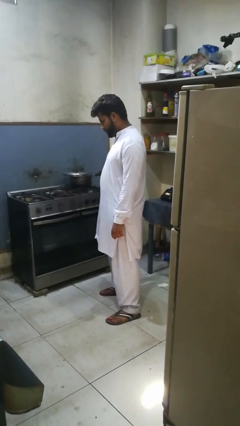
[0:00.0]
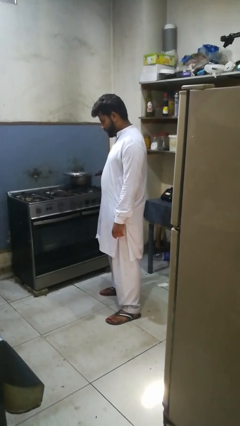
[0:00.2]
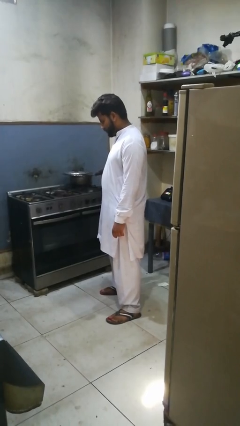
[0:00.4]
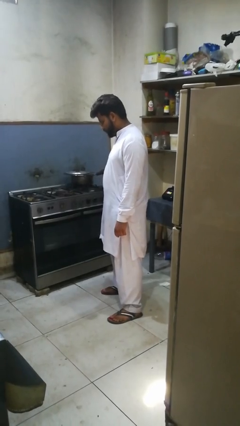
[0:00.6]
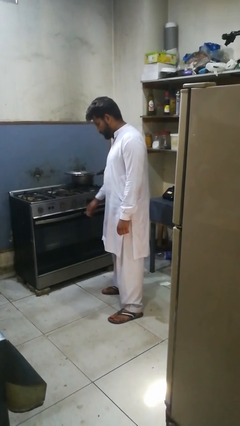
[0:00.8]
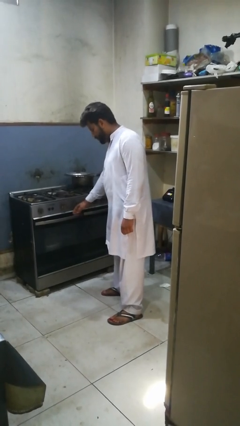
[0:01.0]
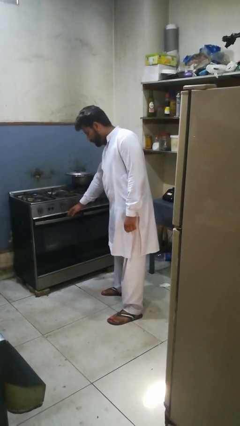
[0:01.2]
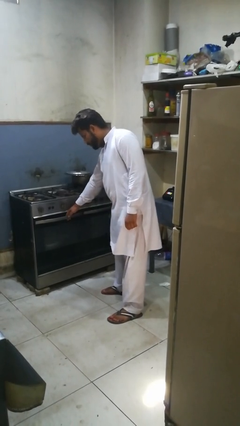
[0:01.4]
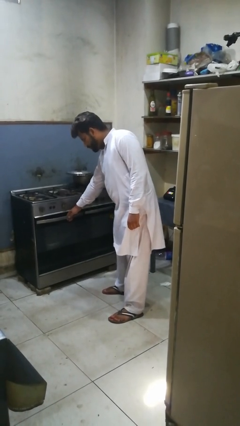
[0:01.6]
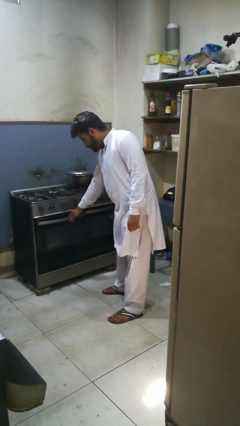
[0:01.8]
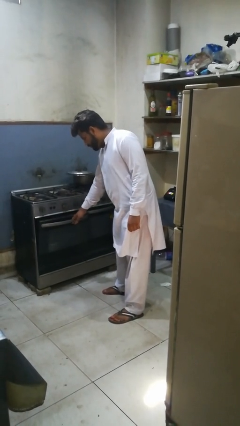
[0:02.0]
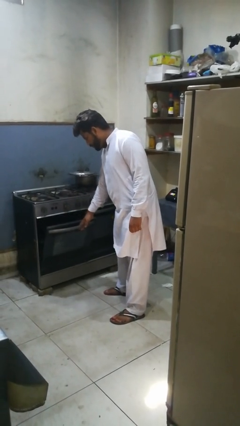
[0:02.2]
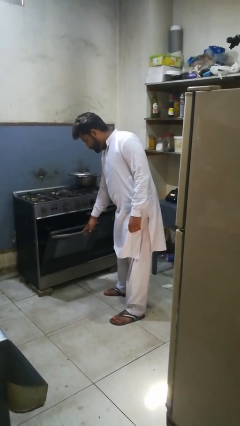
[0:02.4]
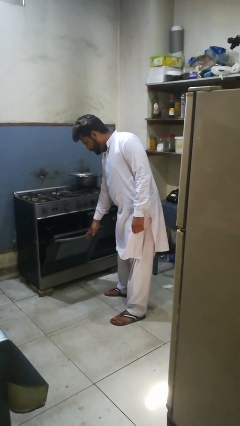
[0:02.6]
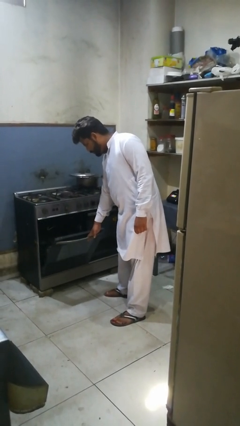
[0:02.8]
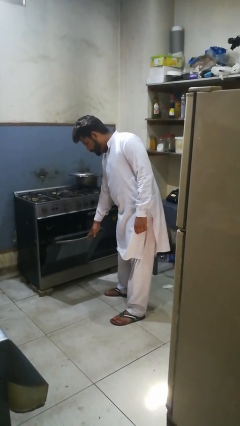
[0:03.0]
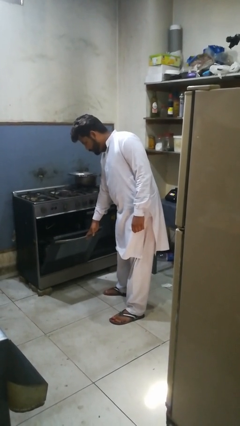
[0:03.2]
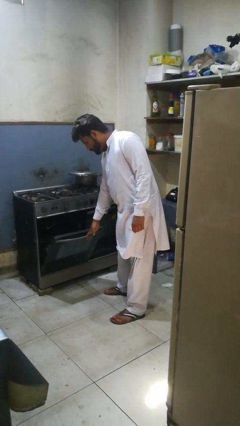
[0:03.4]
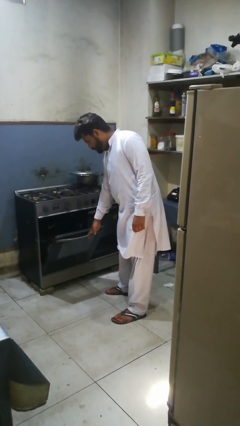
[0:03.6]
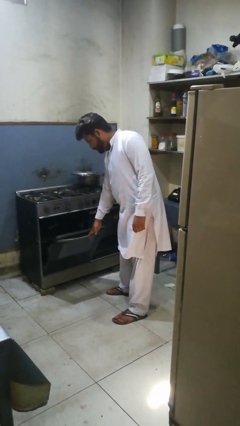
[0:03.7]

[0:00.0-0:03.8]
person opens oven door

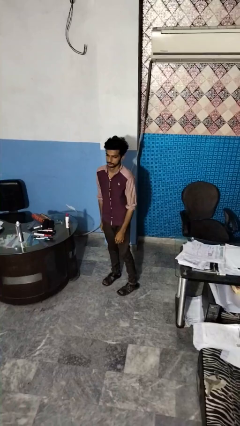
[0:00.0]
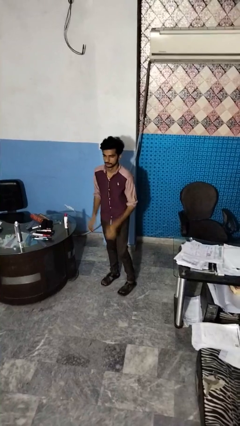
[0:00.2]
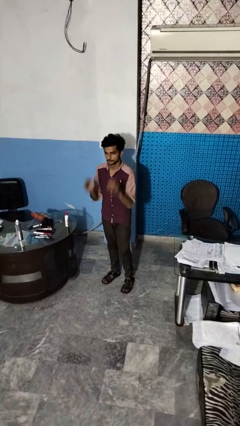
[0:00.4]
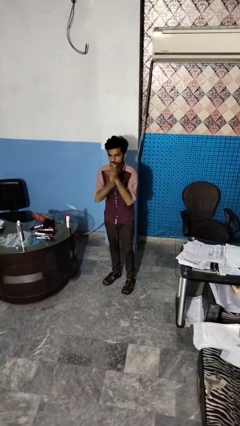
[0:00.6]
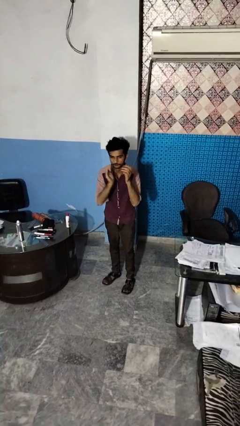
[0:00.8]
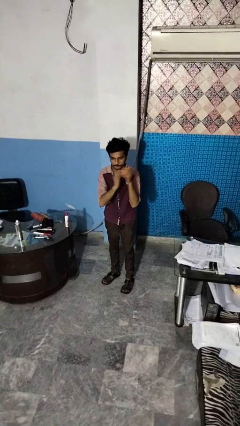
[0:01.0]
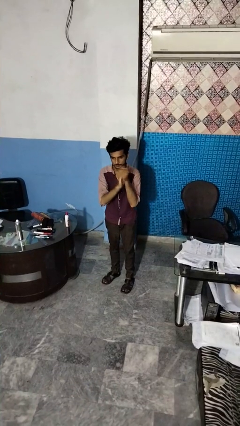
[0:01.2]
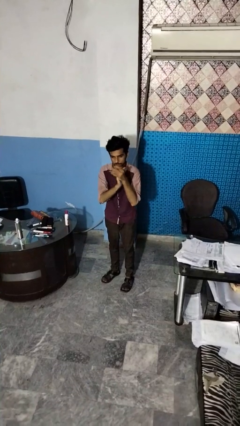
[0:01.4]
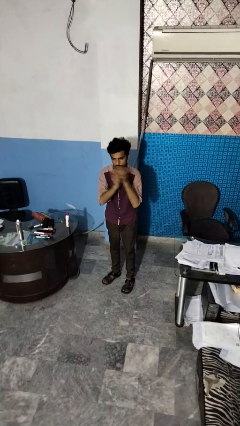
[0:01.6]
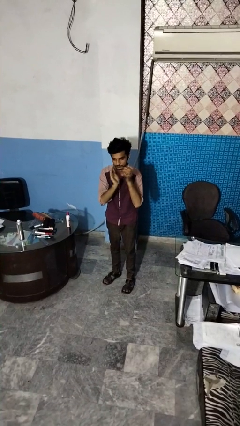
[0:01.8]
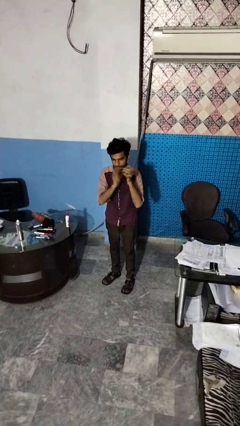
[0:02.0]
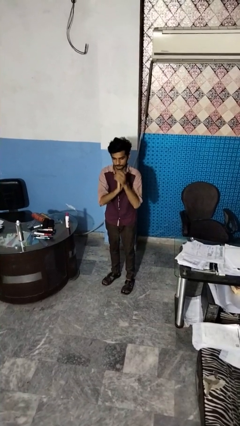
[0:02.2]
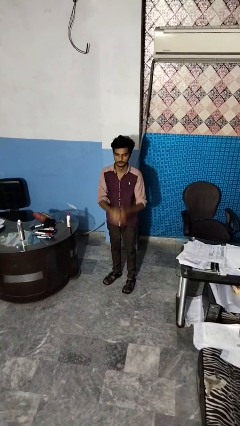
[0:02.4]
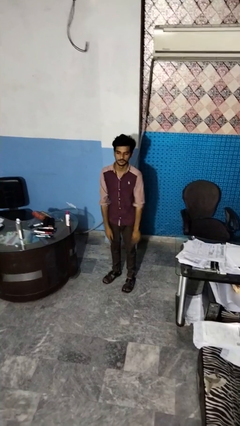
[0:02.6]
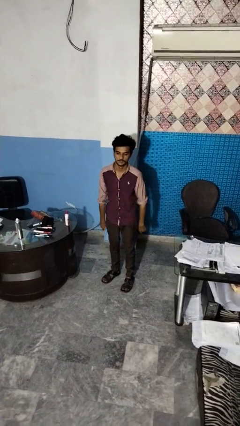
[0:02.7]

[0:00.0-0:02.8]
person claps hands

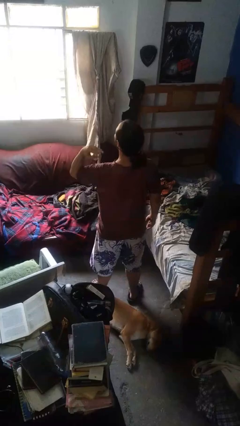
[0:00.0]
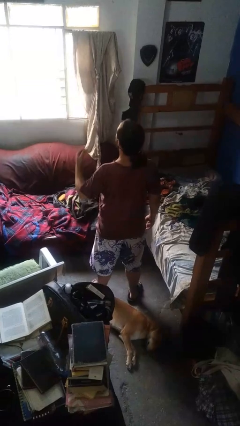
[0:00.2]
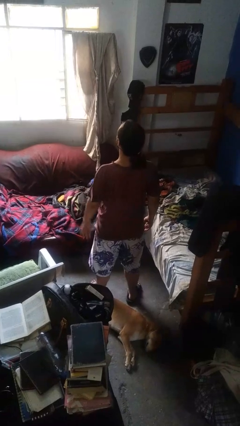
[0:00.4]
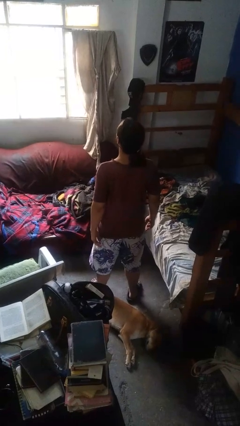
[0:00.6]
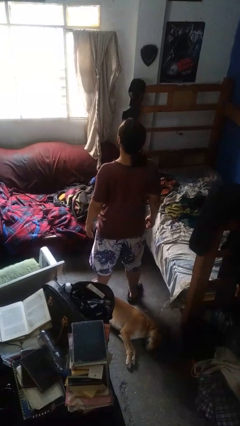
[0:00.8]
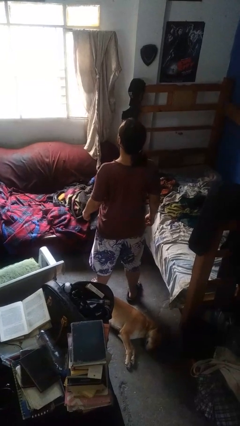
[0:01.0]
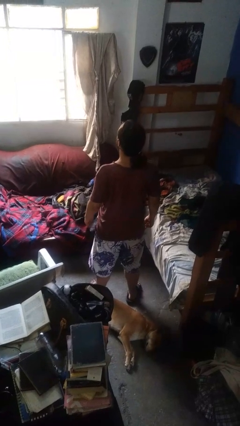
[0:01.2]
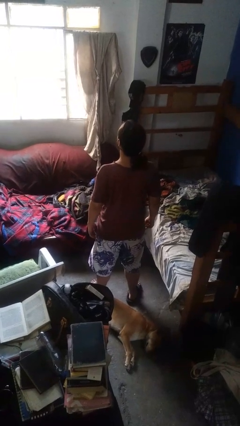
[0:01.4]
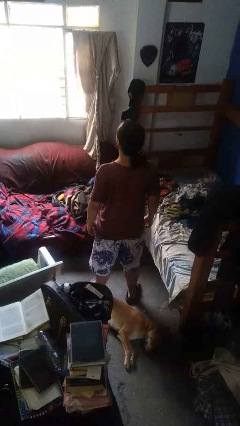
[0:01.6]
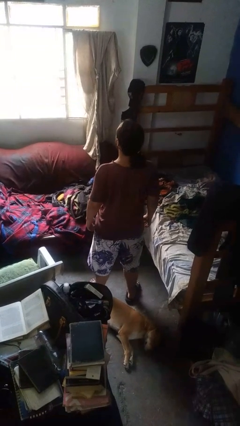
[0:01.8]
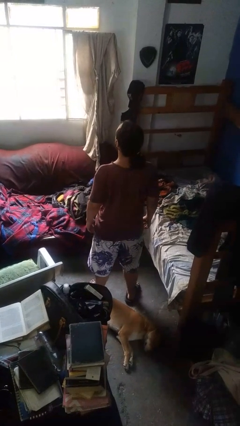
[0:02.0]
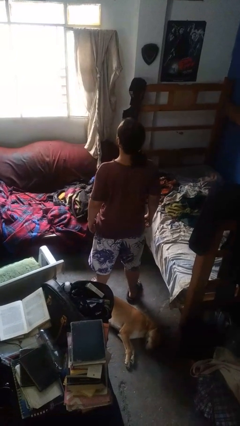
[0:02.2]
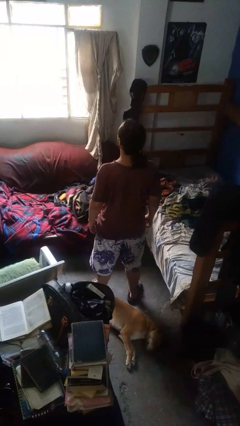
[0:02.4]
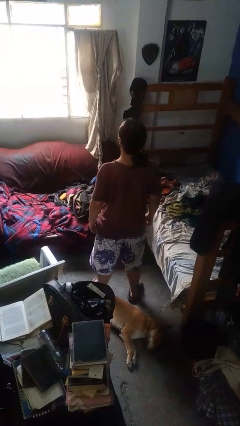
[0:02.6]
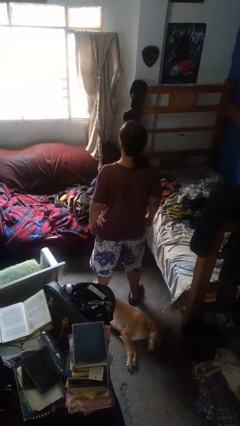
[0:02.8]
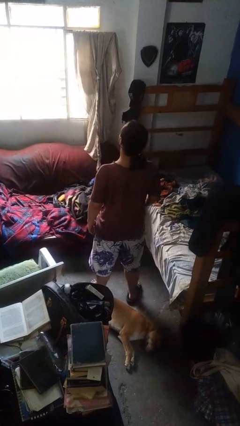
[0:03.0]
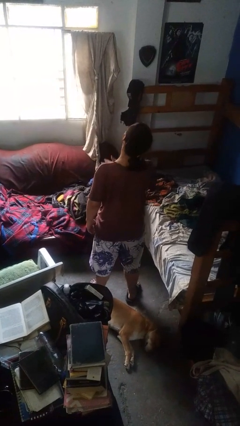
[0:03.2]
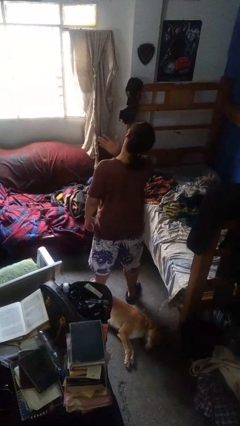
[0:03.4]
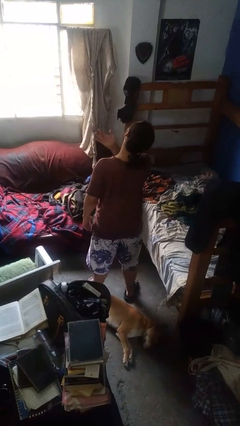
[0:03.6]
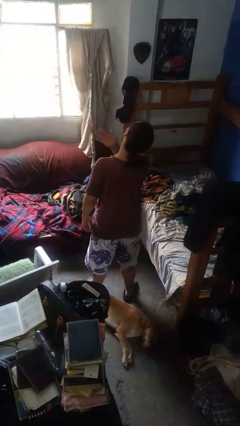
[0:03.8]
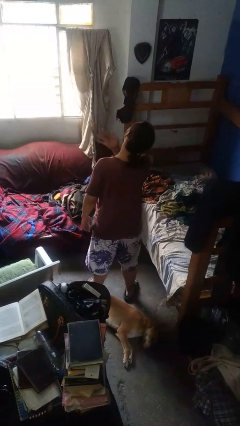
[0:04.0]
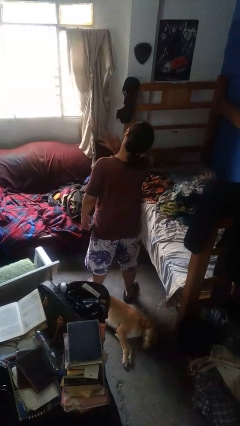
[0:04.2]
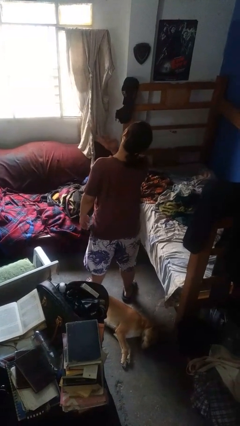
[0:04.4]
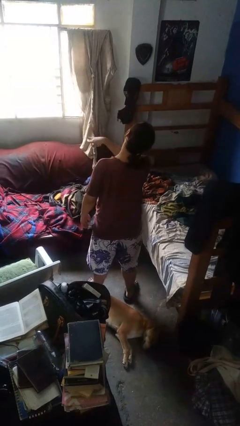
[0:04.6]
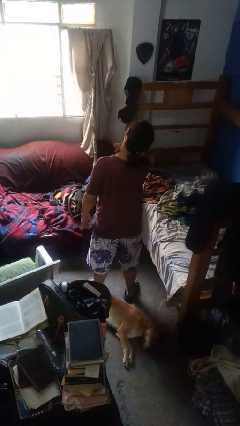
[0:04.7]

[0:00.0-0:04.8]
person gestures watch closely

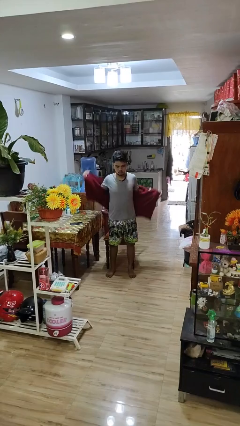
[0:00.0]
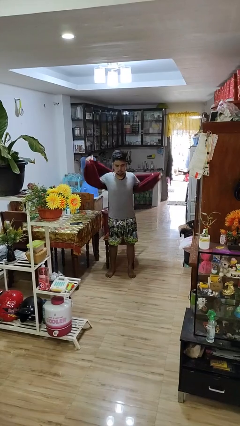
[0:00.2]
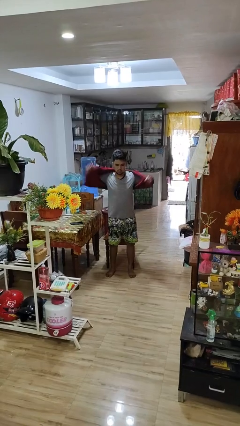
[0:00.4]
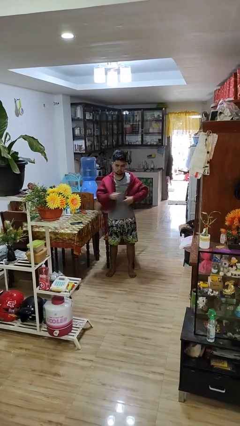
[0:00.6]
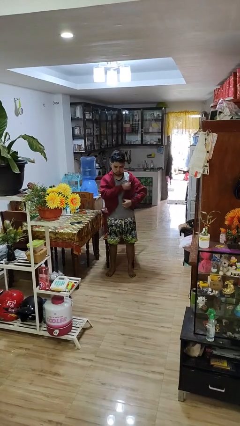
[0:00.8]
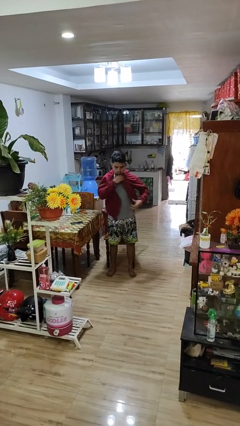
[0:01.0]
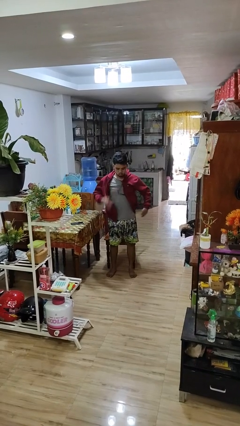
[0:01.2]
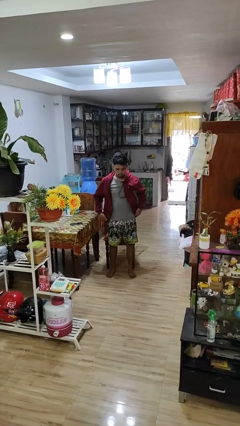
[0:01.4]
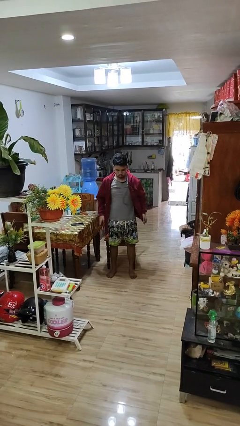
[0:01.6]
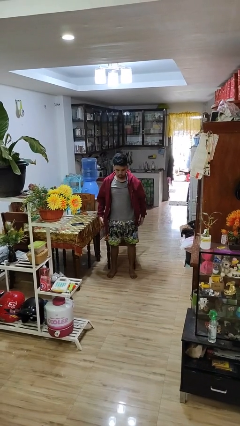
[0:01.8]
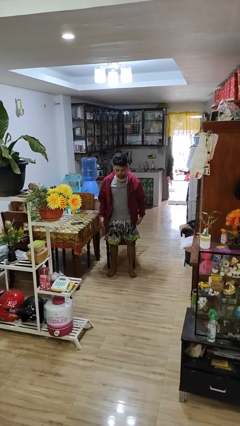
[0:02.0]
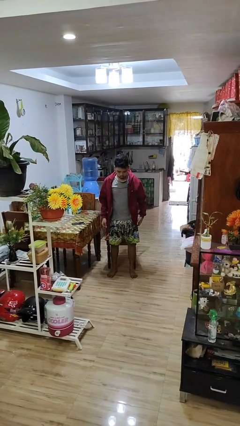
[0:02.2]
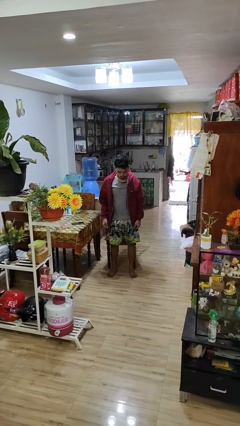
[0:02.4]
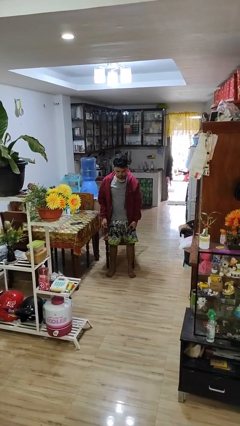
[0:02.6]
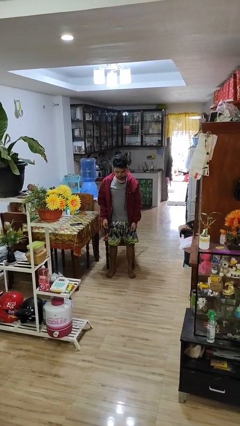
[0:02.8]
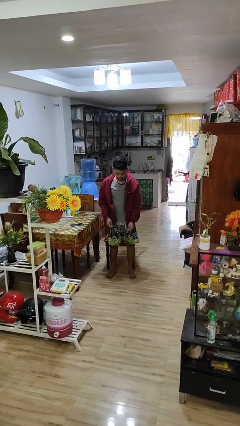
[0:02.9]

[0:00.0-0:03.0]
person puts on jacket

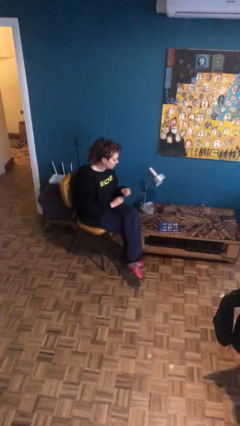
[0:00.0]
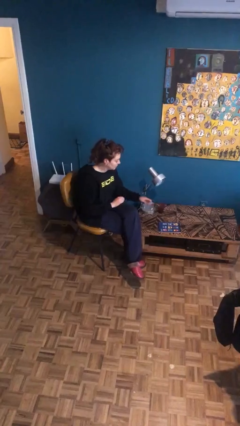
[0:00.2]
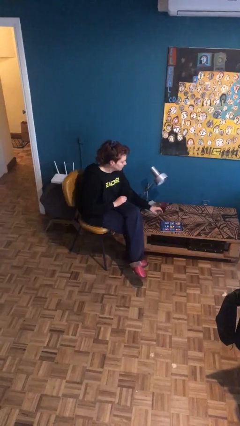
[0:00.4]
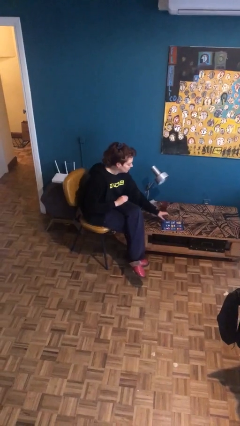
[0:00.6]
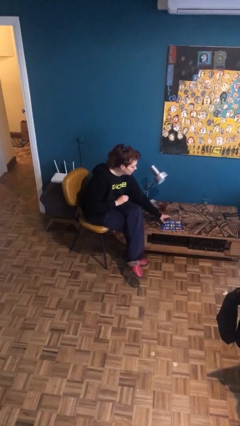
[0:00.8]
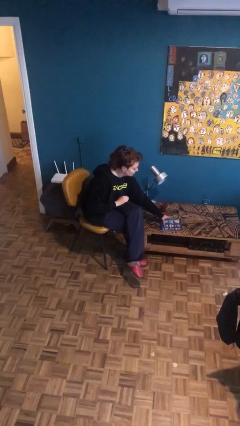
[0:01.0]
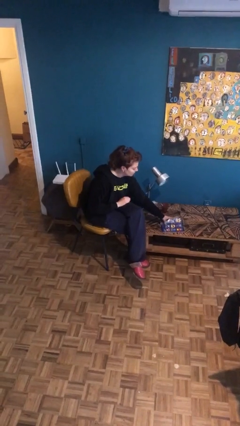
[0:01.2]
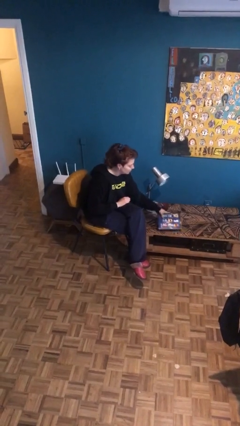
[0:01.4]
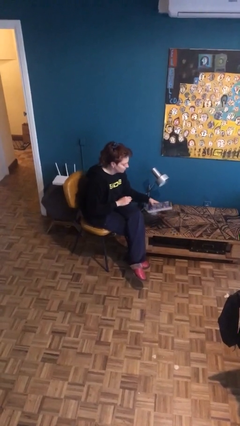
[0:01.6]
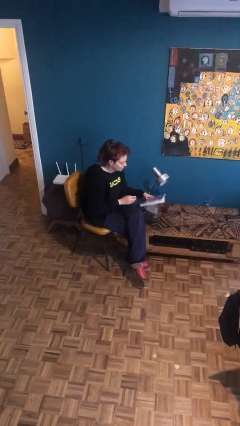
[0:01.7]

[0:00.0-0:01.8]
person picks up object from table

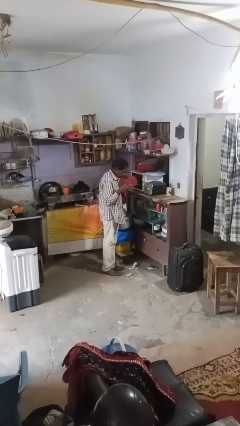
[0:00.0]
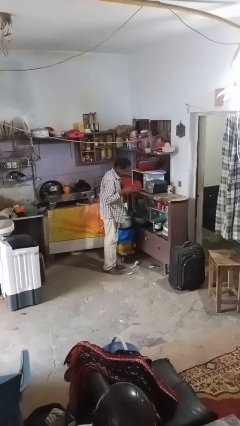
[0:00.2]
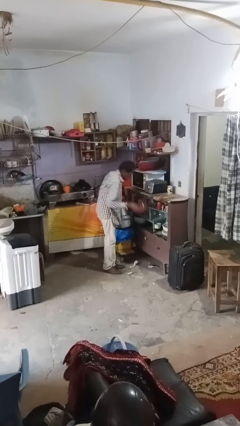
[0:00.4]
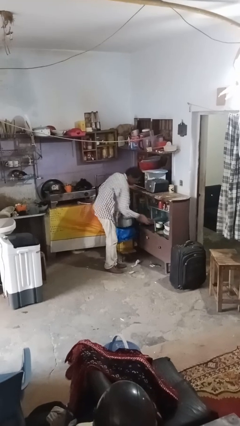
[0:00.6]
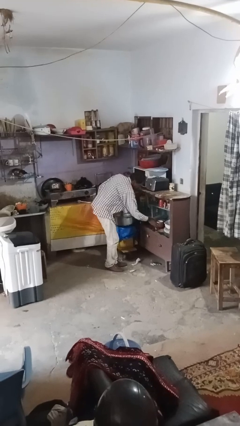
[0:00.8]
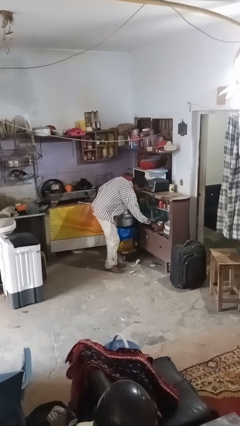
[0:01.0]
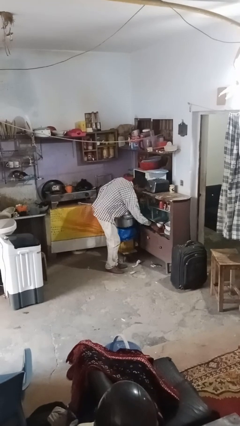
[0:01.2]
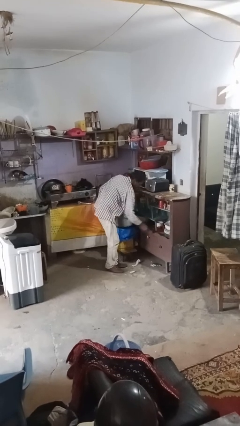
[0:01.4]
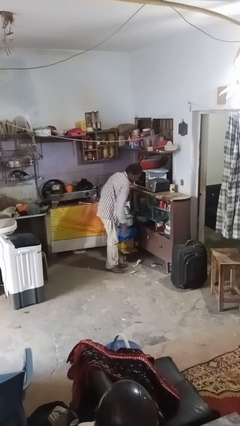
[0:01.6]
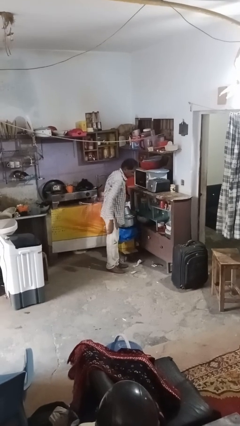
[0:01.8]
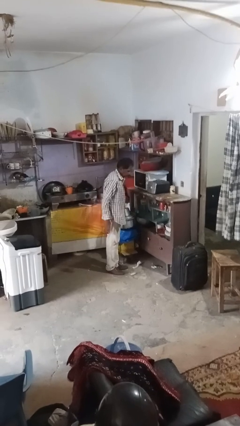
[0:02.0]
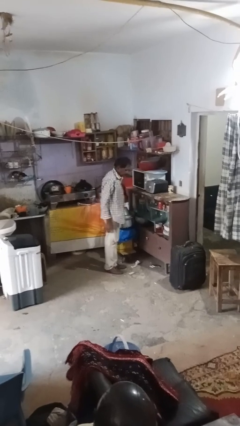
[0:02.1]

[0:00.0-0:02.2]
person puts object into kitchen drawer
